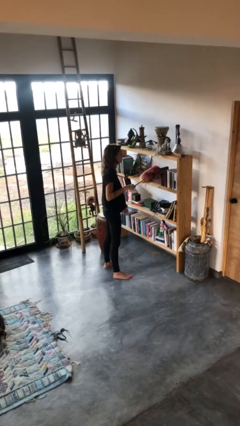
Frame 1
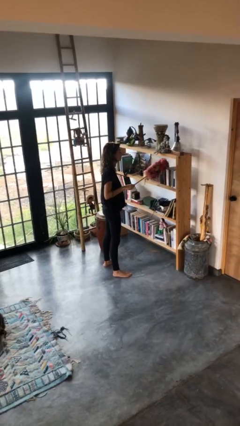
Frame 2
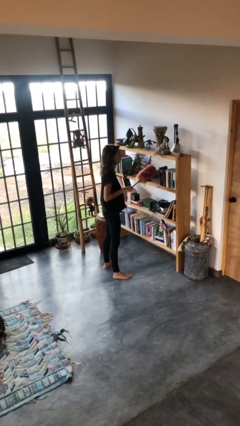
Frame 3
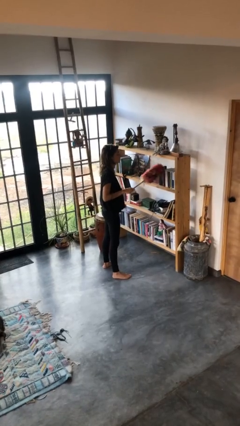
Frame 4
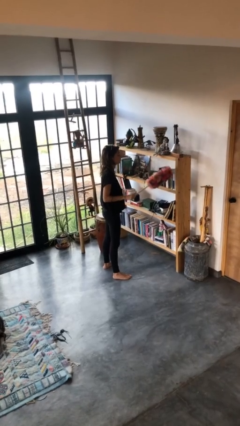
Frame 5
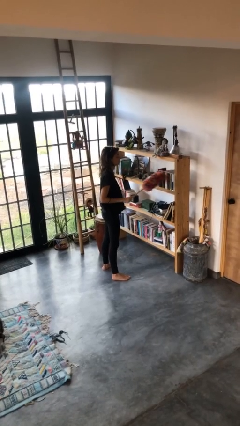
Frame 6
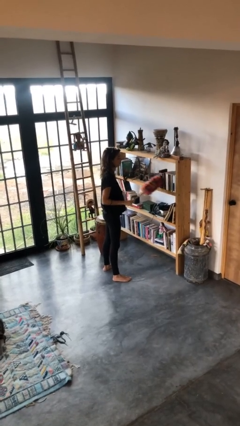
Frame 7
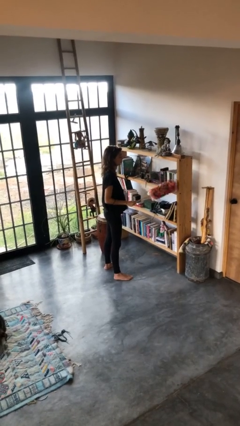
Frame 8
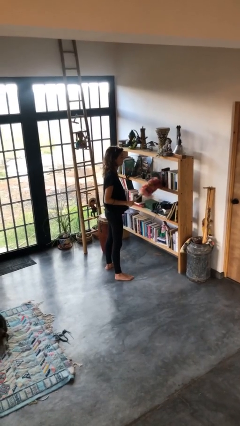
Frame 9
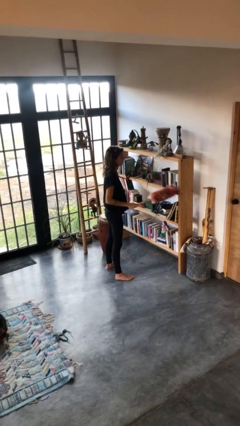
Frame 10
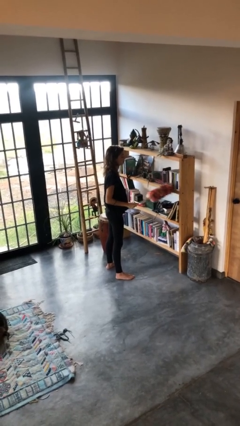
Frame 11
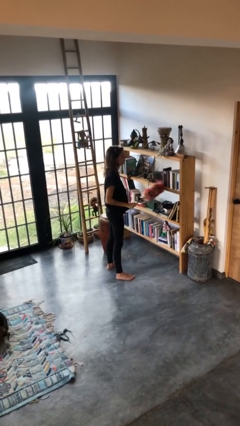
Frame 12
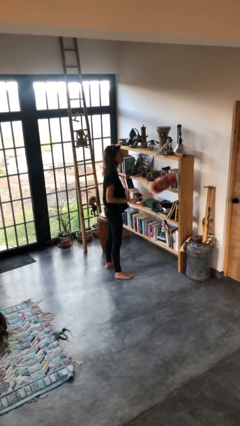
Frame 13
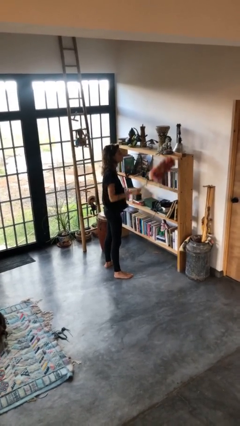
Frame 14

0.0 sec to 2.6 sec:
person dusts furniture

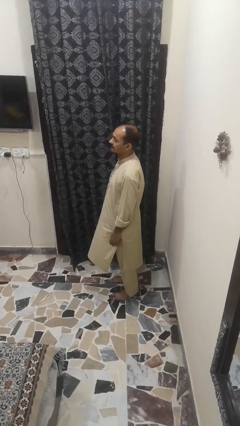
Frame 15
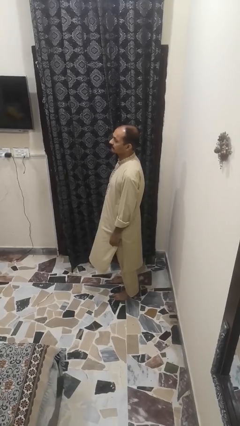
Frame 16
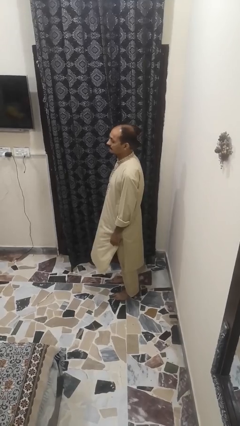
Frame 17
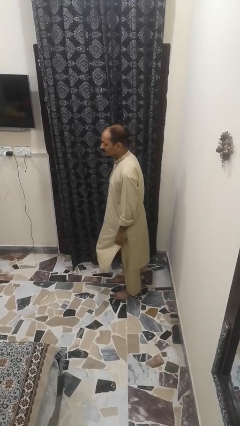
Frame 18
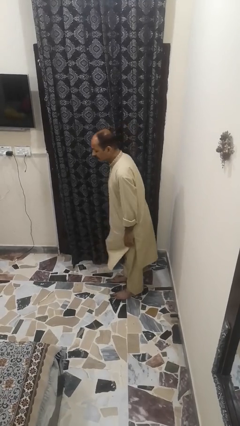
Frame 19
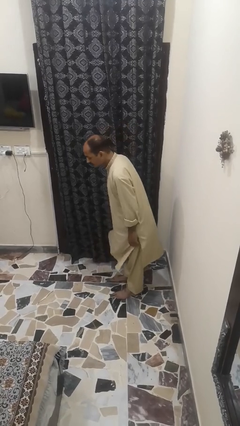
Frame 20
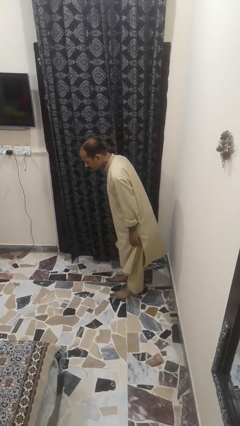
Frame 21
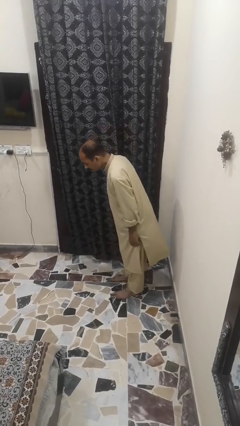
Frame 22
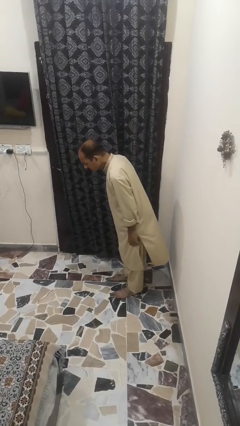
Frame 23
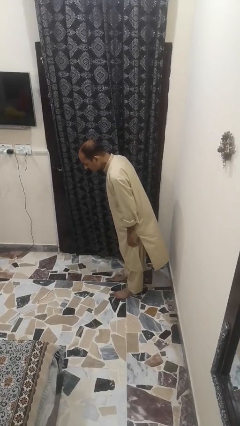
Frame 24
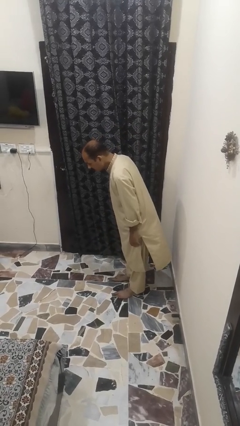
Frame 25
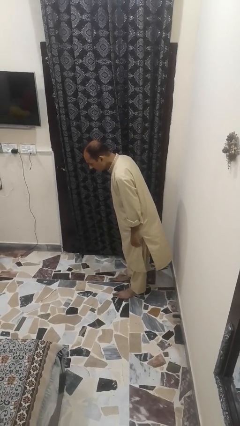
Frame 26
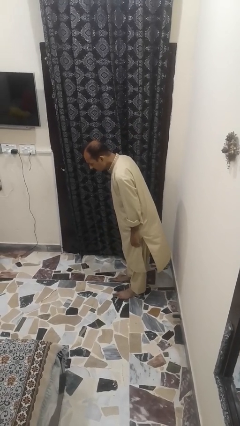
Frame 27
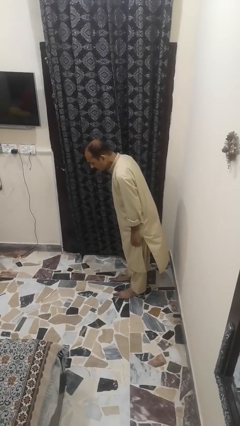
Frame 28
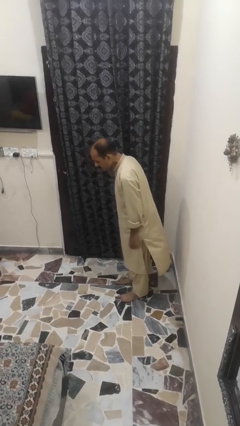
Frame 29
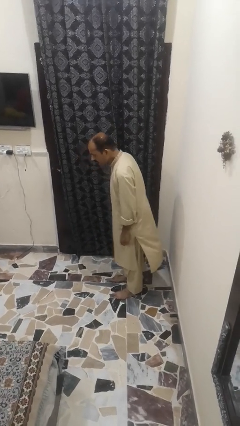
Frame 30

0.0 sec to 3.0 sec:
person bows

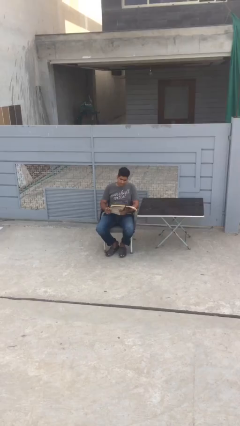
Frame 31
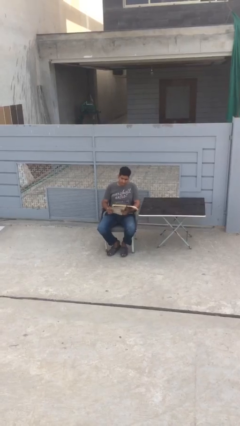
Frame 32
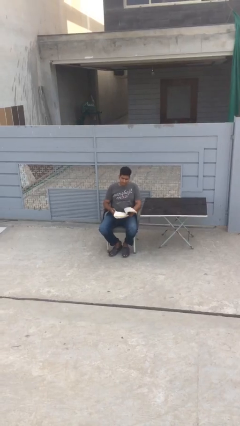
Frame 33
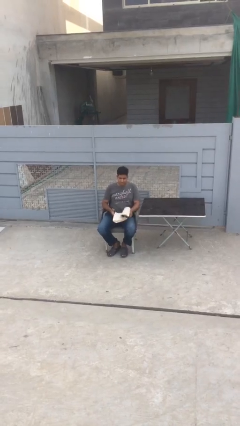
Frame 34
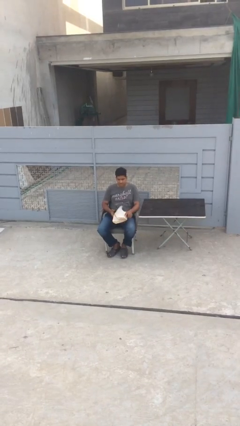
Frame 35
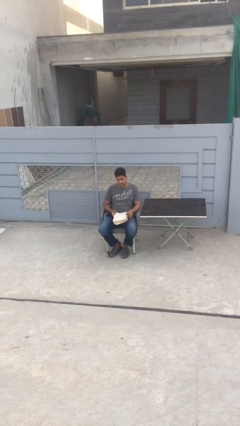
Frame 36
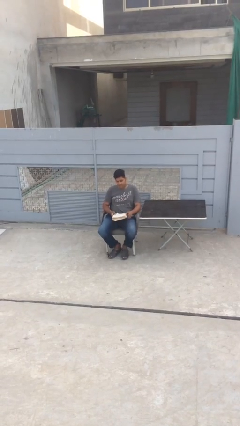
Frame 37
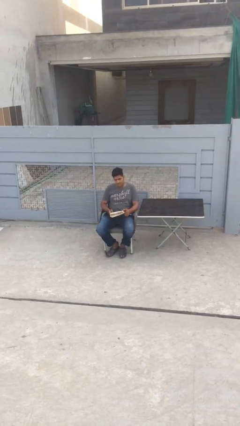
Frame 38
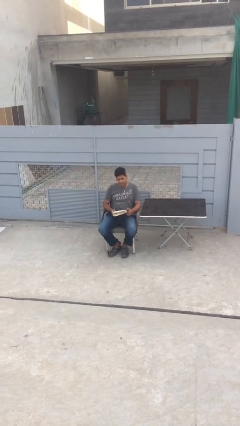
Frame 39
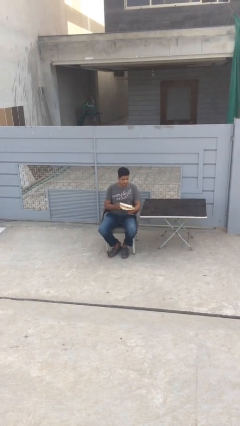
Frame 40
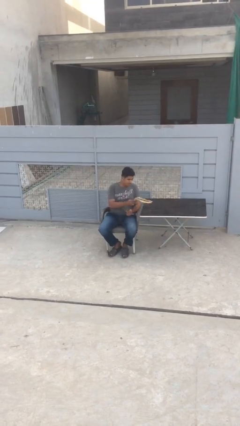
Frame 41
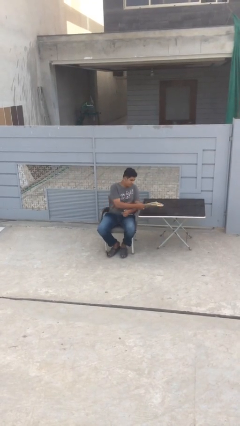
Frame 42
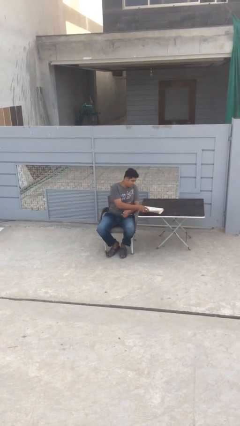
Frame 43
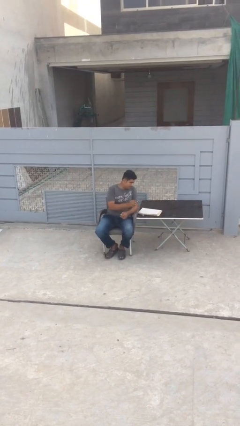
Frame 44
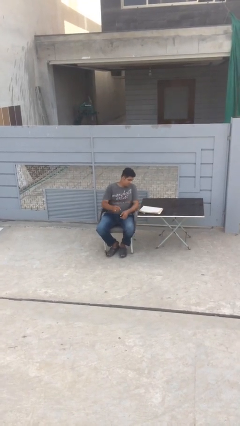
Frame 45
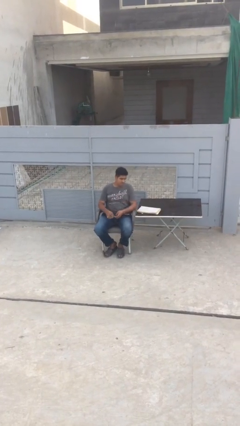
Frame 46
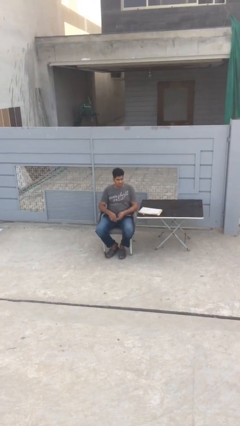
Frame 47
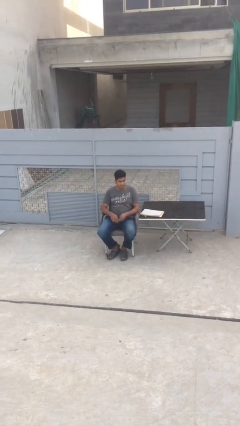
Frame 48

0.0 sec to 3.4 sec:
person puts down object on table

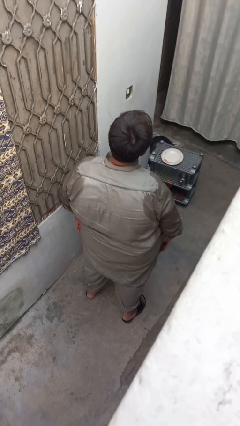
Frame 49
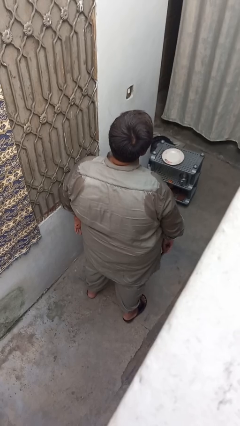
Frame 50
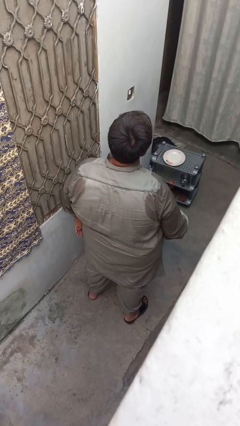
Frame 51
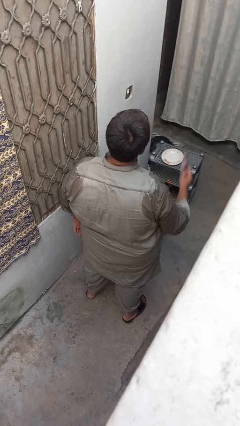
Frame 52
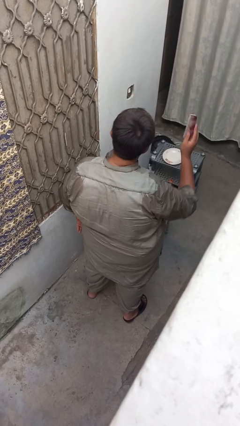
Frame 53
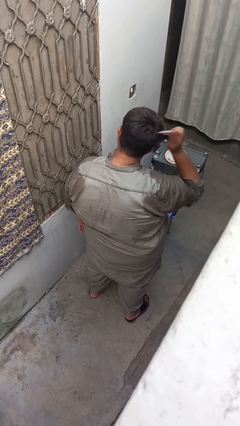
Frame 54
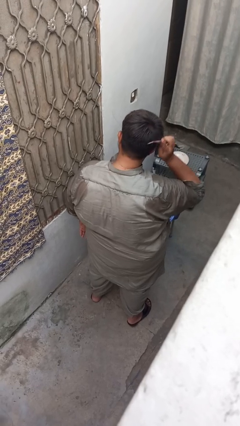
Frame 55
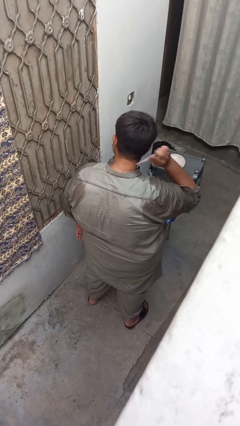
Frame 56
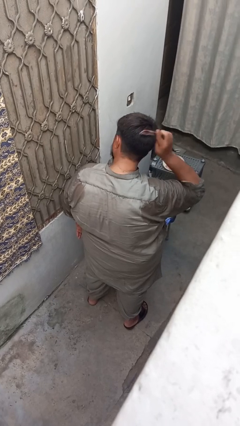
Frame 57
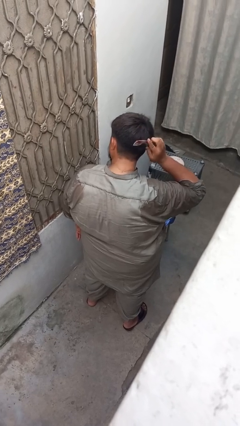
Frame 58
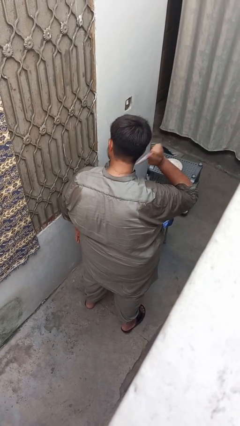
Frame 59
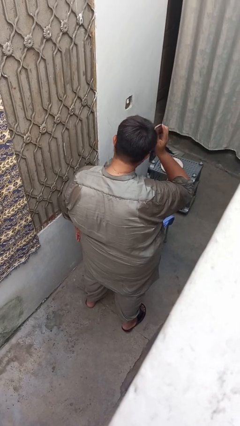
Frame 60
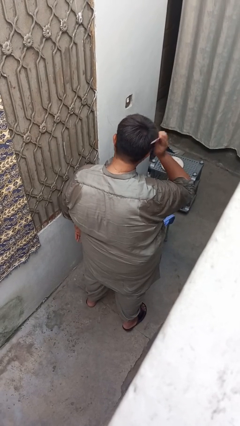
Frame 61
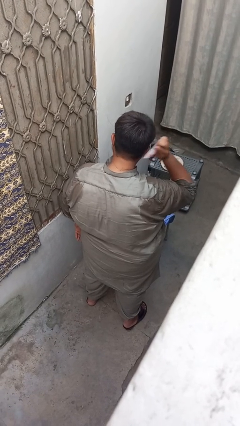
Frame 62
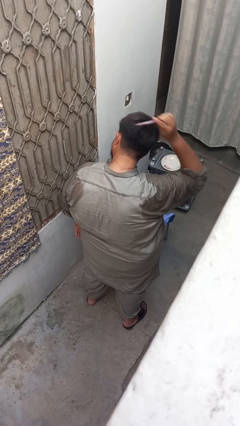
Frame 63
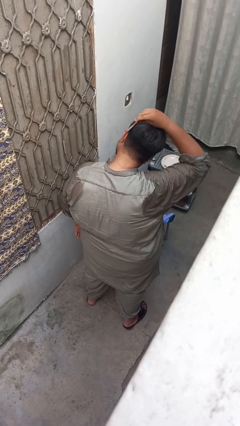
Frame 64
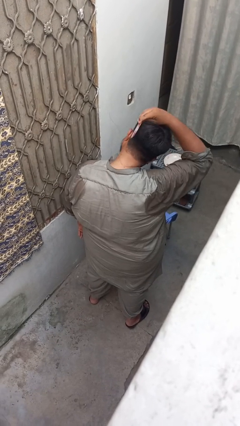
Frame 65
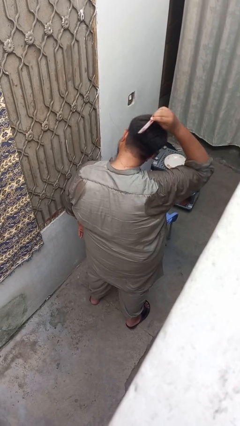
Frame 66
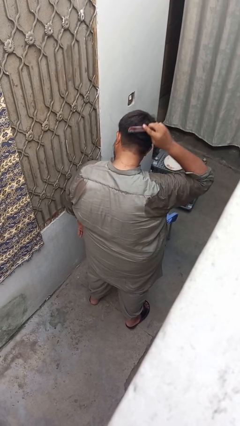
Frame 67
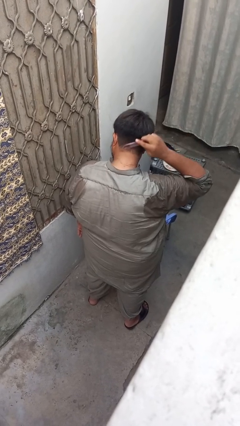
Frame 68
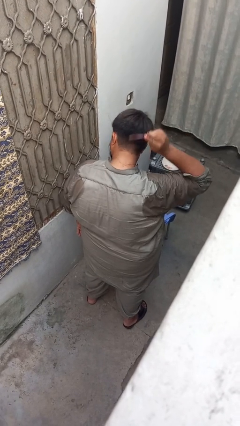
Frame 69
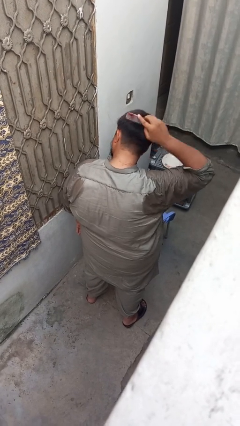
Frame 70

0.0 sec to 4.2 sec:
person brushes hair

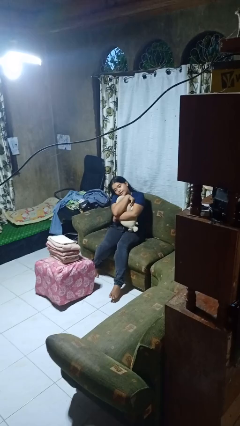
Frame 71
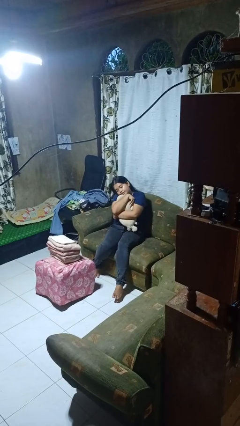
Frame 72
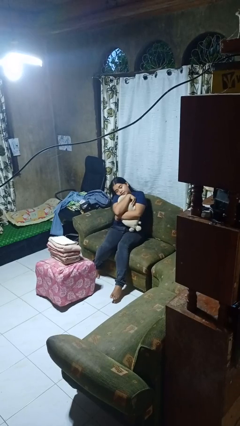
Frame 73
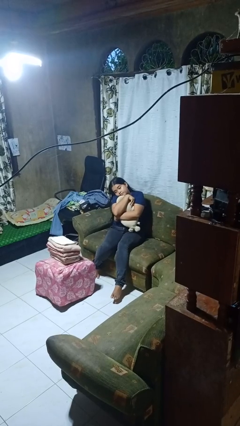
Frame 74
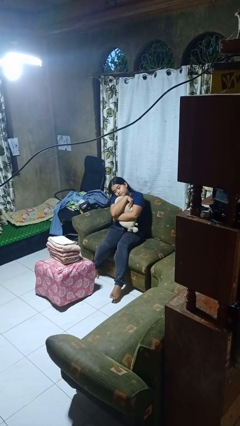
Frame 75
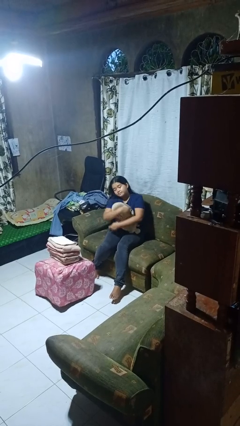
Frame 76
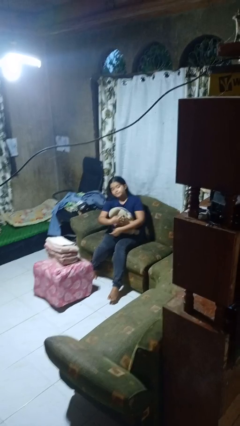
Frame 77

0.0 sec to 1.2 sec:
person hugs stuffed animal

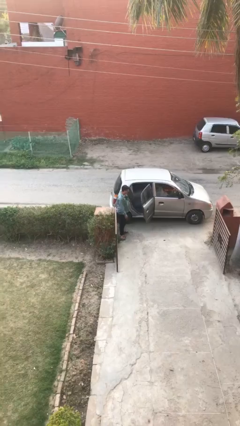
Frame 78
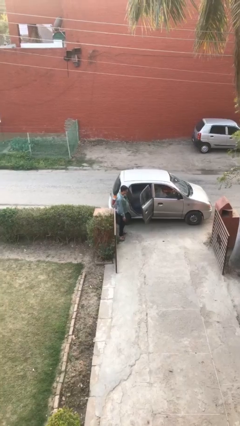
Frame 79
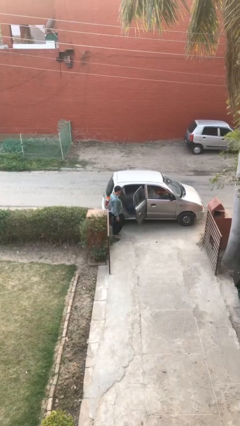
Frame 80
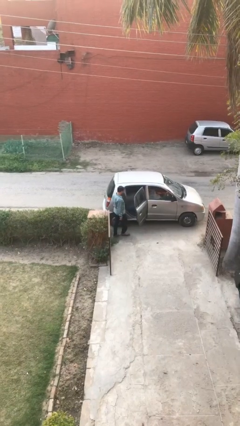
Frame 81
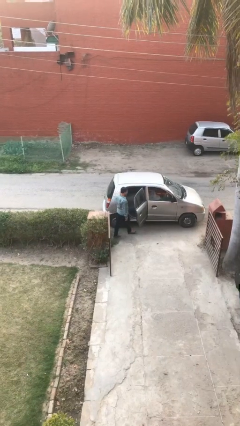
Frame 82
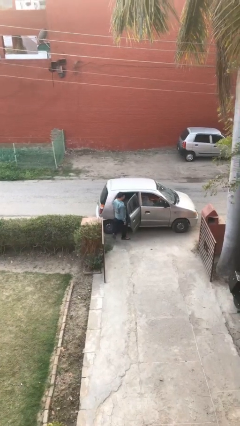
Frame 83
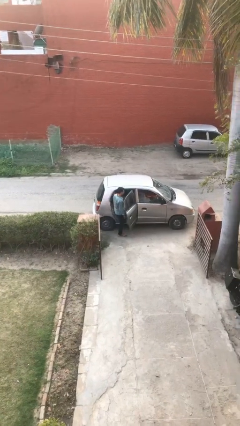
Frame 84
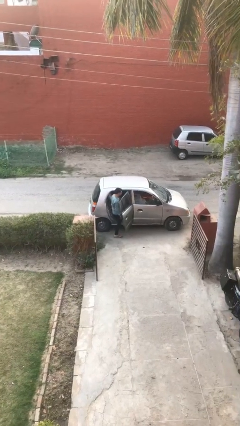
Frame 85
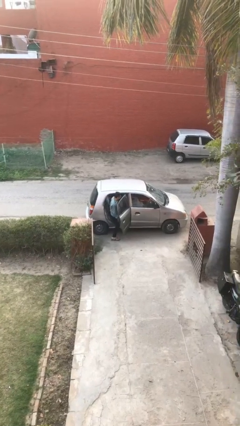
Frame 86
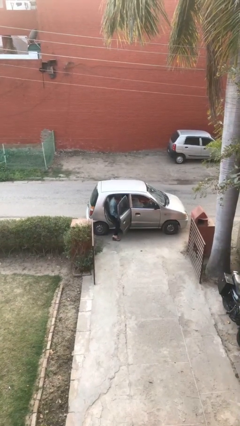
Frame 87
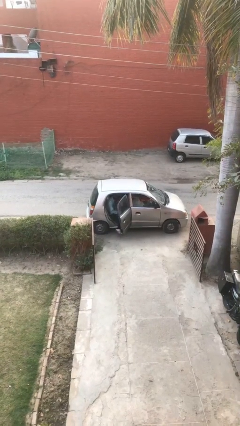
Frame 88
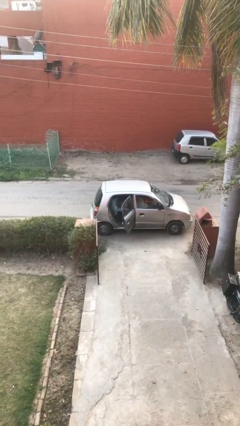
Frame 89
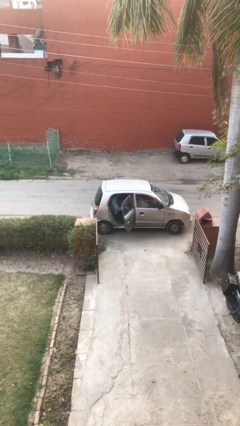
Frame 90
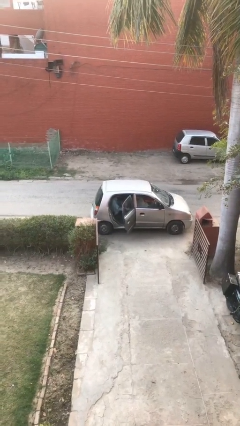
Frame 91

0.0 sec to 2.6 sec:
person enters car

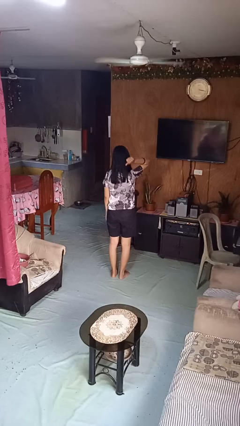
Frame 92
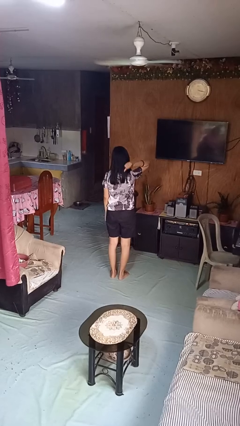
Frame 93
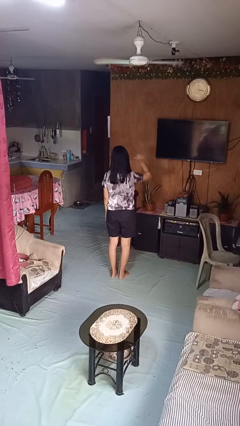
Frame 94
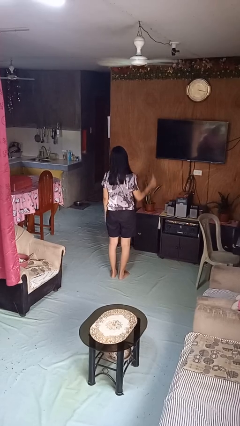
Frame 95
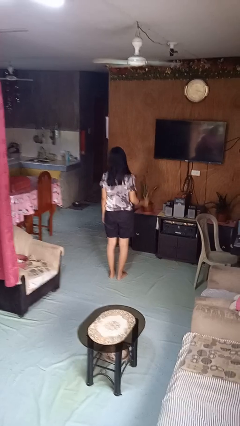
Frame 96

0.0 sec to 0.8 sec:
person gestures behind me
